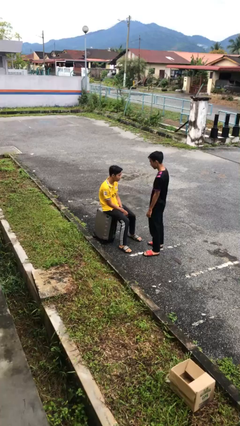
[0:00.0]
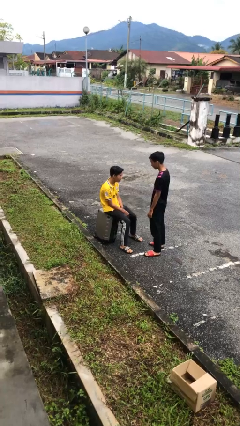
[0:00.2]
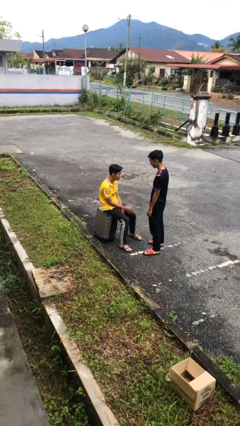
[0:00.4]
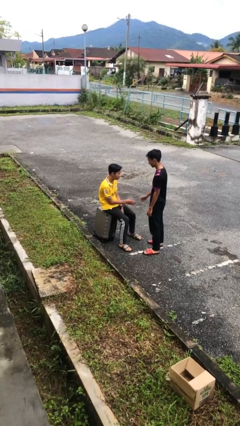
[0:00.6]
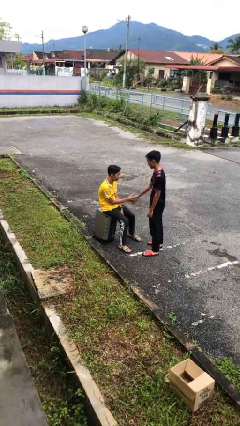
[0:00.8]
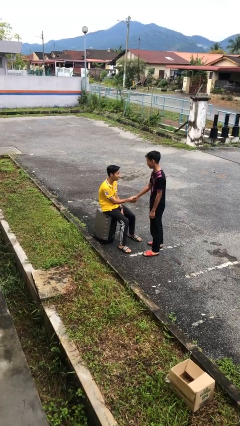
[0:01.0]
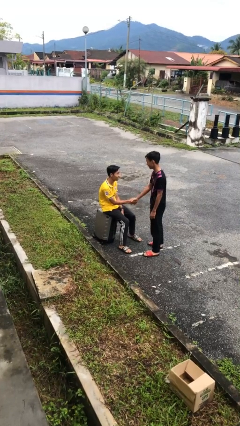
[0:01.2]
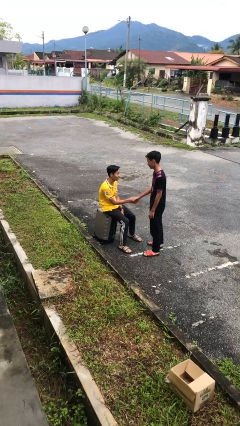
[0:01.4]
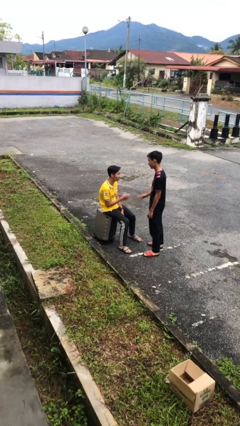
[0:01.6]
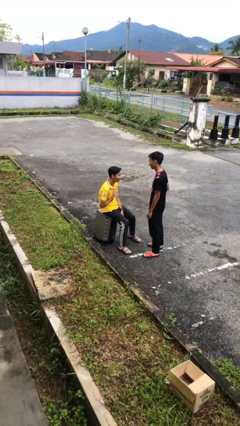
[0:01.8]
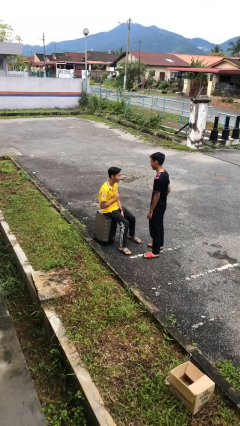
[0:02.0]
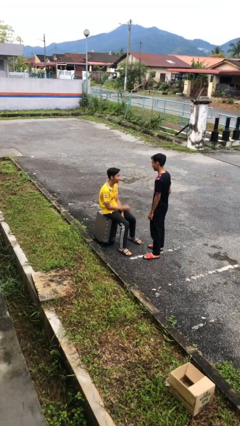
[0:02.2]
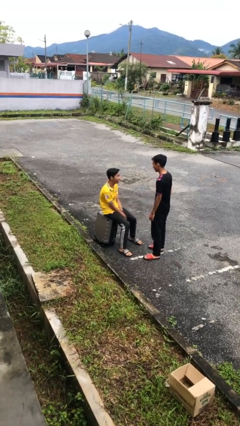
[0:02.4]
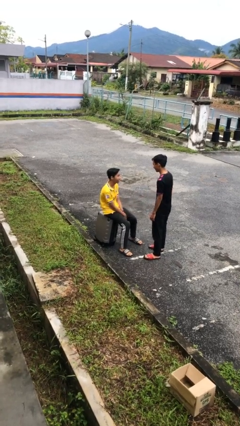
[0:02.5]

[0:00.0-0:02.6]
person shakes hand

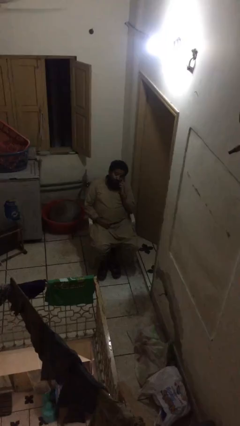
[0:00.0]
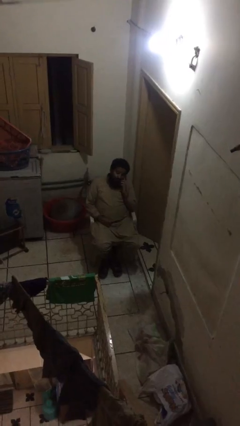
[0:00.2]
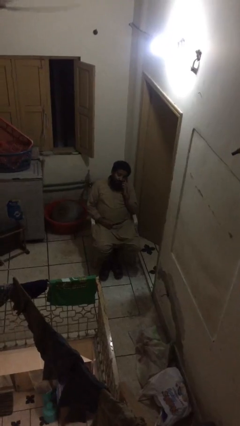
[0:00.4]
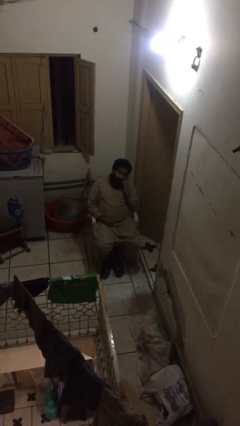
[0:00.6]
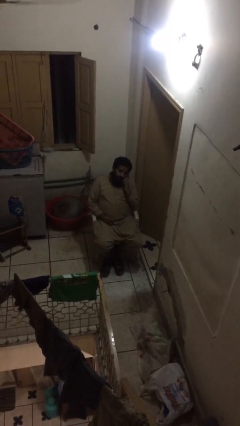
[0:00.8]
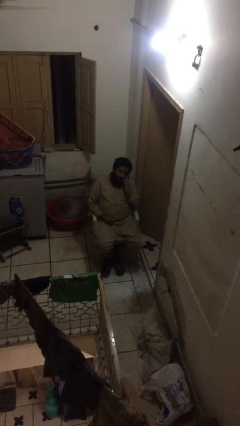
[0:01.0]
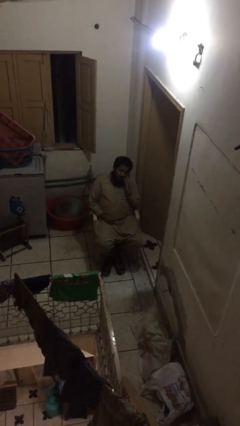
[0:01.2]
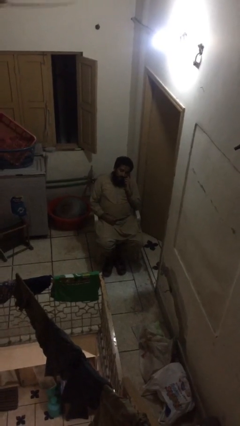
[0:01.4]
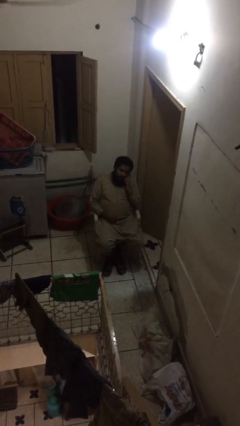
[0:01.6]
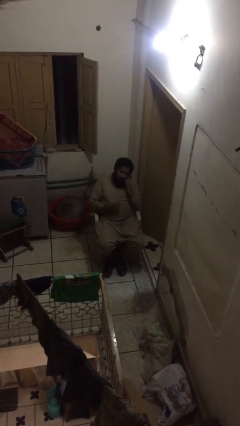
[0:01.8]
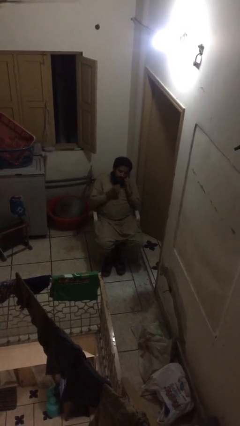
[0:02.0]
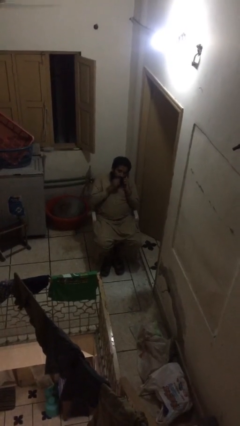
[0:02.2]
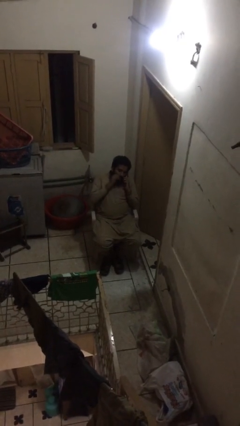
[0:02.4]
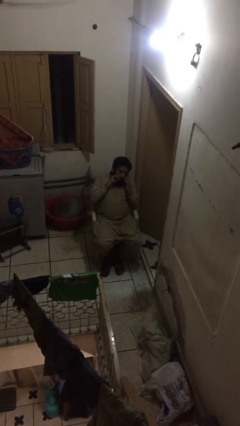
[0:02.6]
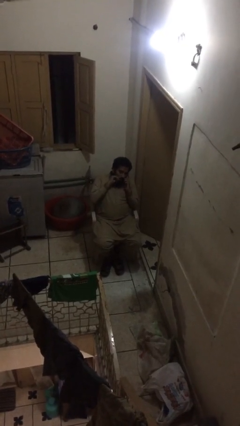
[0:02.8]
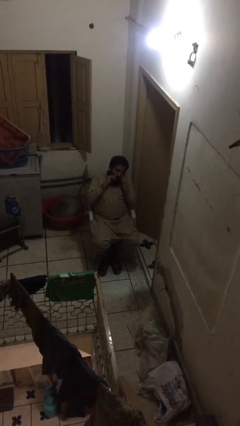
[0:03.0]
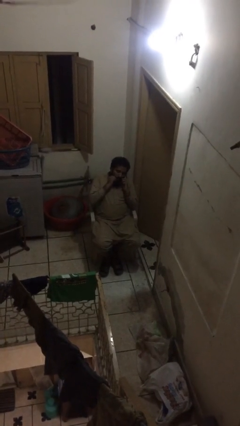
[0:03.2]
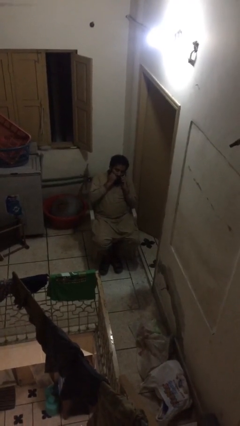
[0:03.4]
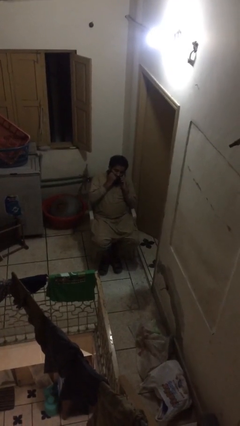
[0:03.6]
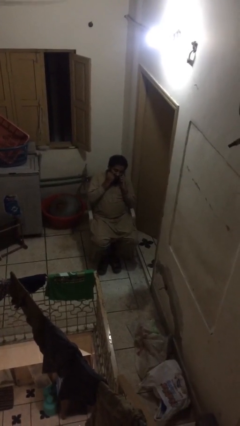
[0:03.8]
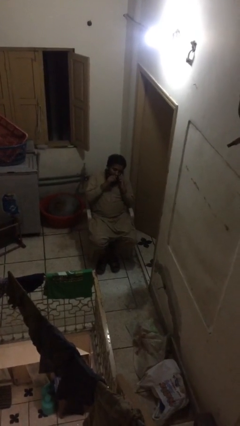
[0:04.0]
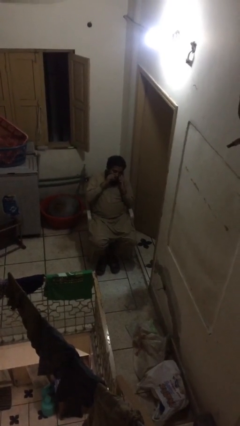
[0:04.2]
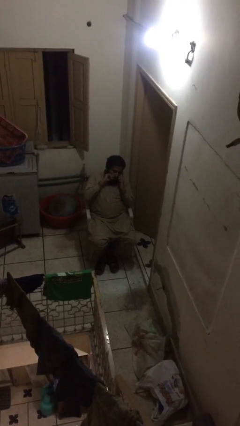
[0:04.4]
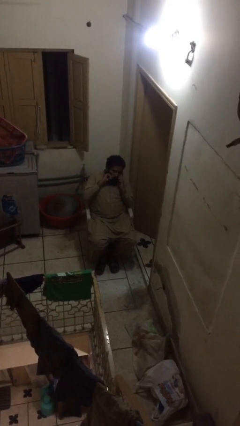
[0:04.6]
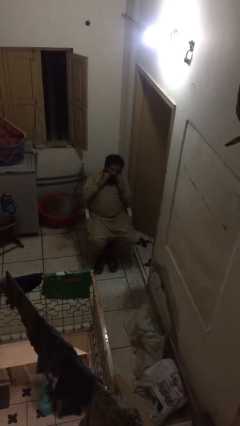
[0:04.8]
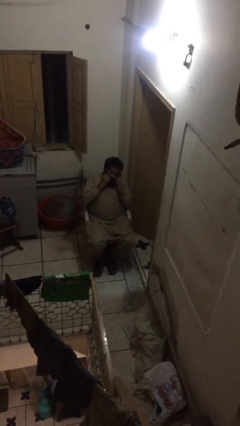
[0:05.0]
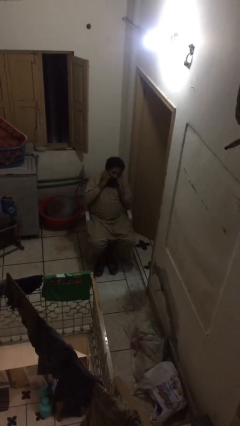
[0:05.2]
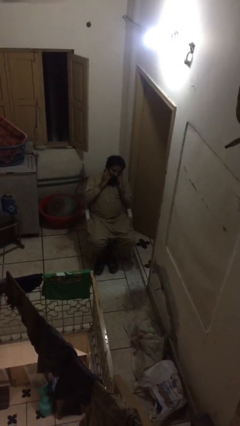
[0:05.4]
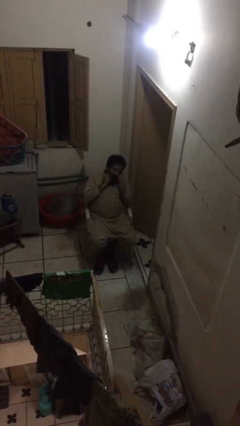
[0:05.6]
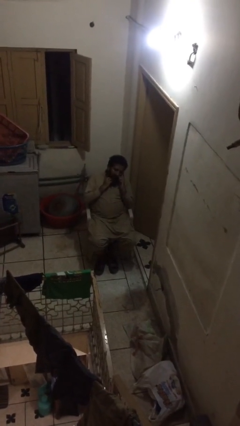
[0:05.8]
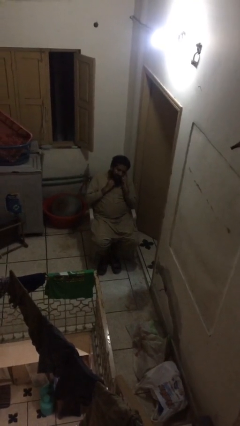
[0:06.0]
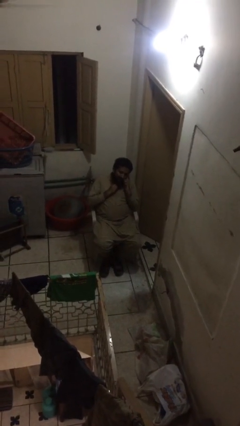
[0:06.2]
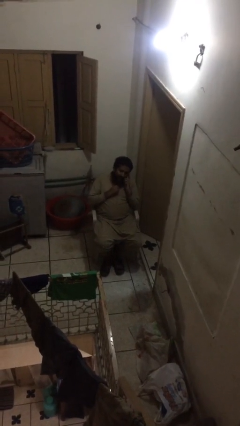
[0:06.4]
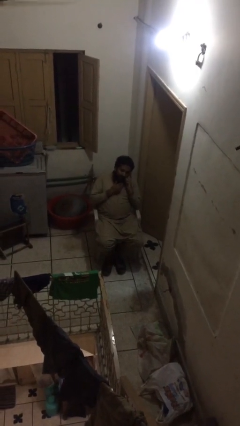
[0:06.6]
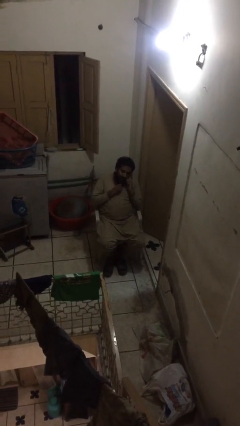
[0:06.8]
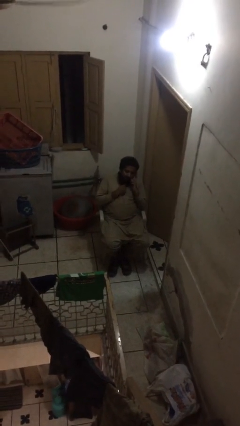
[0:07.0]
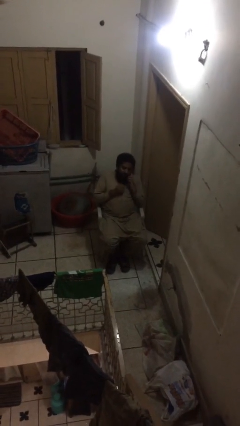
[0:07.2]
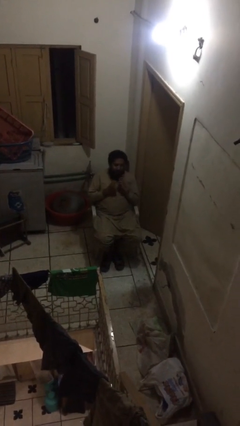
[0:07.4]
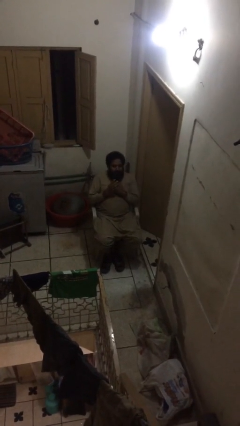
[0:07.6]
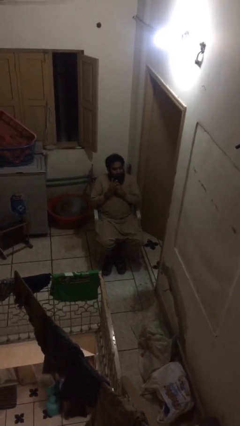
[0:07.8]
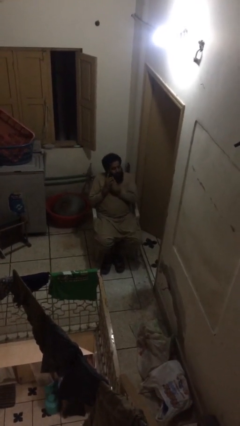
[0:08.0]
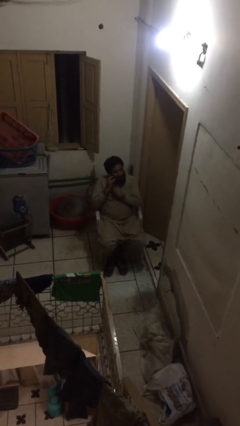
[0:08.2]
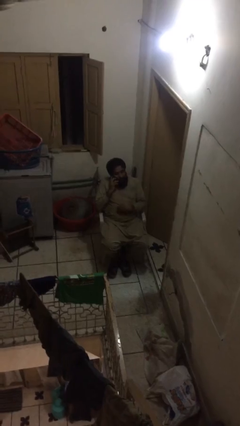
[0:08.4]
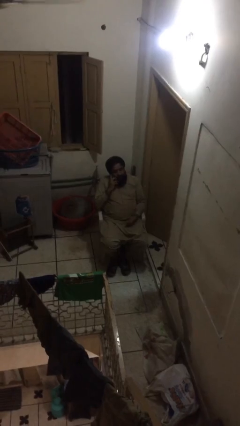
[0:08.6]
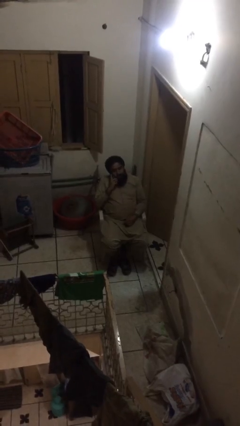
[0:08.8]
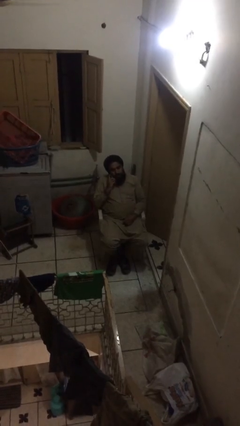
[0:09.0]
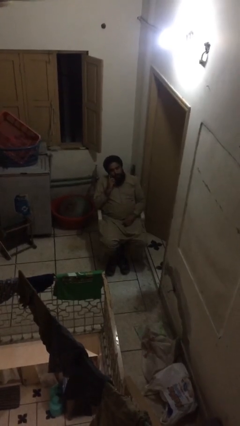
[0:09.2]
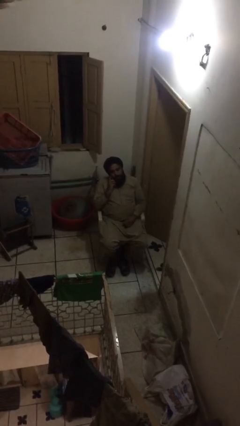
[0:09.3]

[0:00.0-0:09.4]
person talks on phone

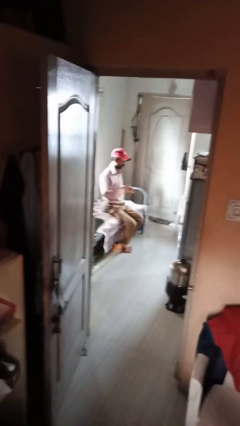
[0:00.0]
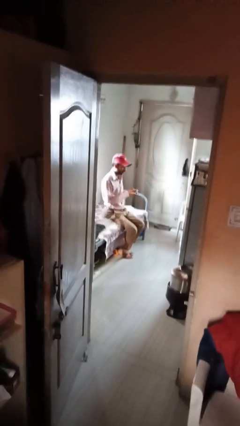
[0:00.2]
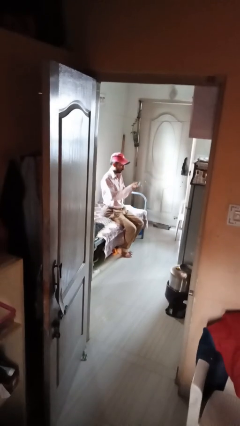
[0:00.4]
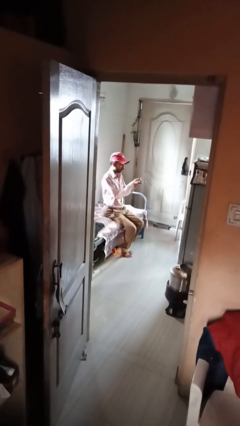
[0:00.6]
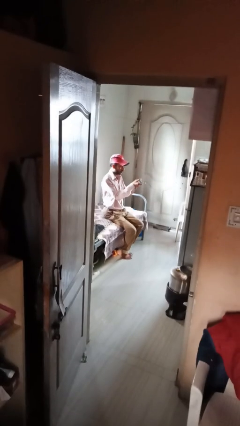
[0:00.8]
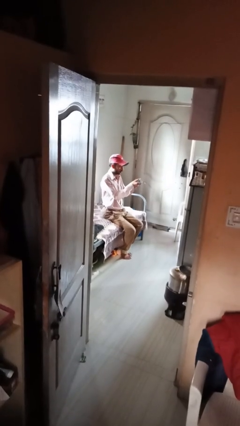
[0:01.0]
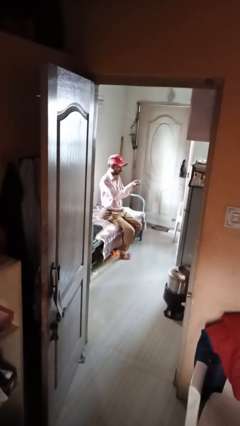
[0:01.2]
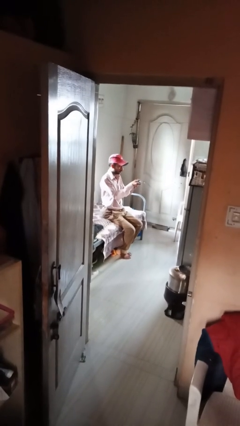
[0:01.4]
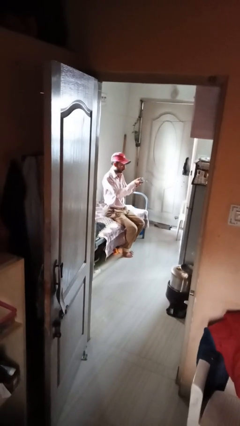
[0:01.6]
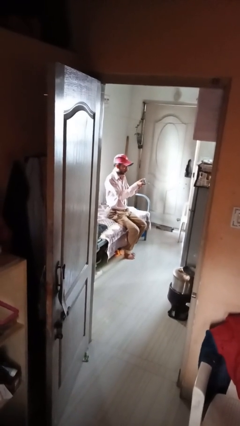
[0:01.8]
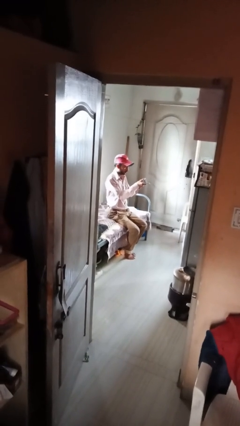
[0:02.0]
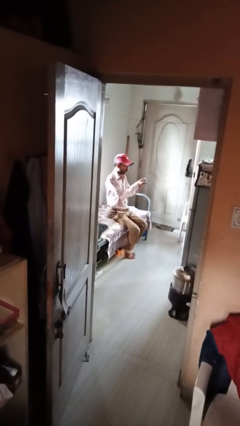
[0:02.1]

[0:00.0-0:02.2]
person clips fingernails

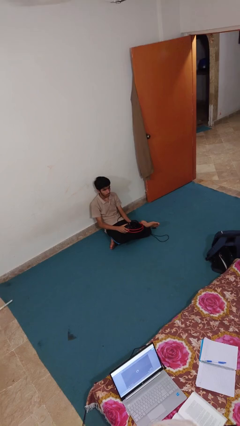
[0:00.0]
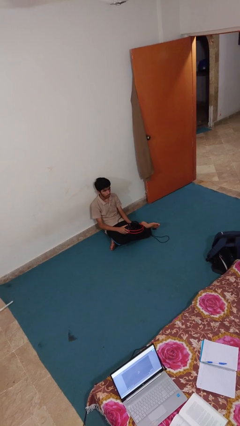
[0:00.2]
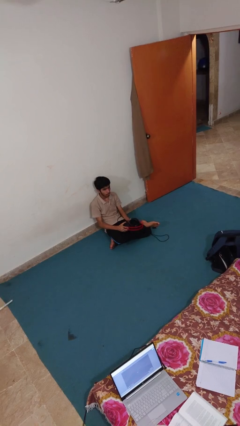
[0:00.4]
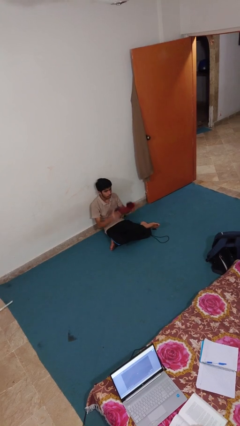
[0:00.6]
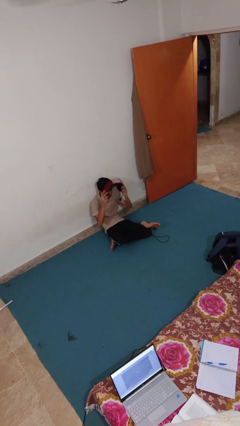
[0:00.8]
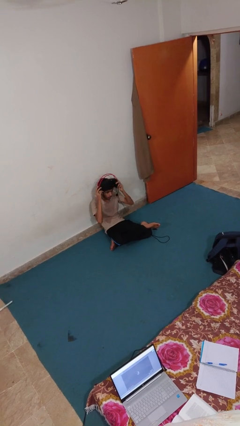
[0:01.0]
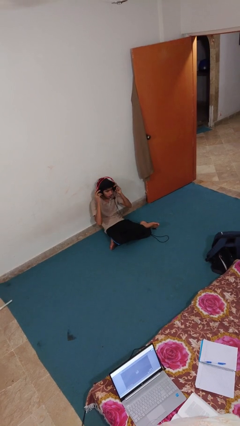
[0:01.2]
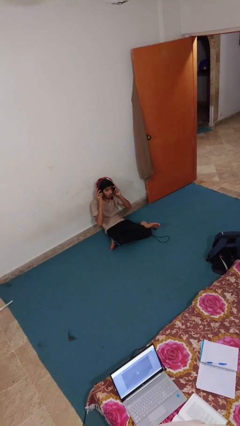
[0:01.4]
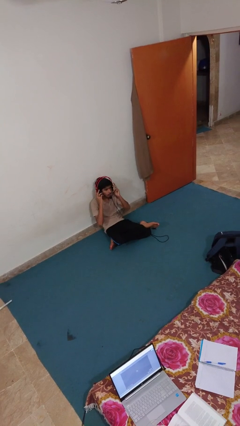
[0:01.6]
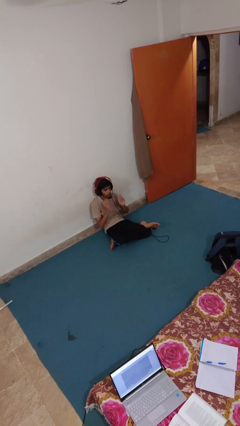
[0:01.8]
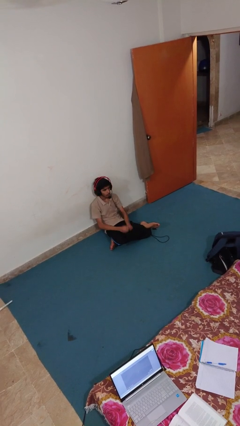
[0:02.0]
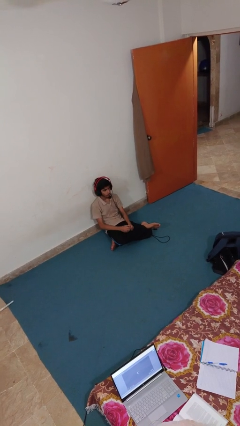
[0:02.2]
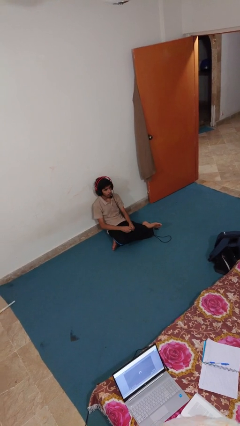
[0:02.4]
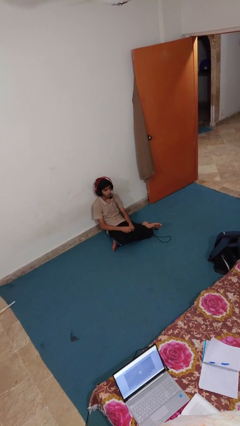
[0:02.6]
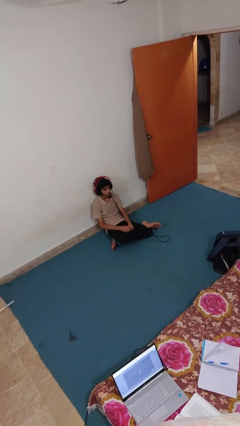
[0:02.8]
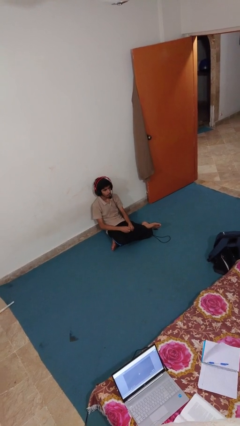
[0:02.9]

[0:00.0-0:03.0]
person puts on headphones

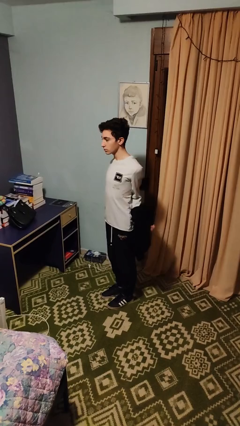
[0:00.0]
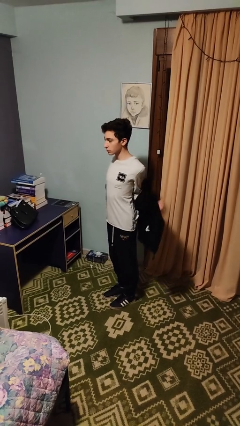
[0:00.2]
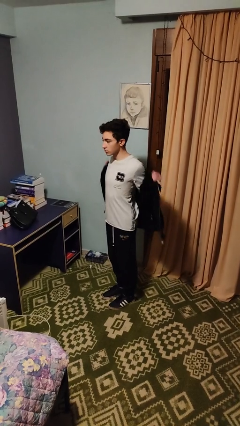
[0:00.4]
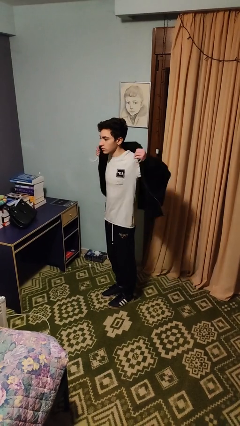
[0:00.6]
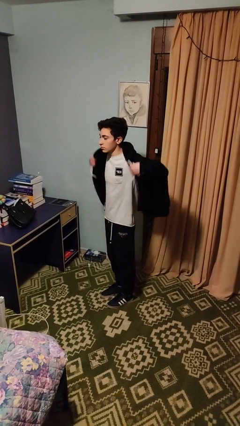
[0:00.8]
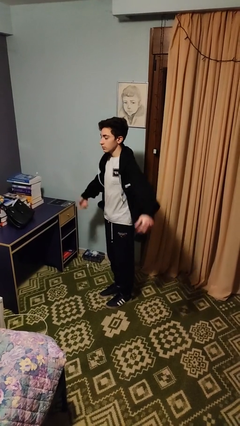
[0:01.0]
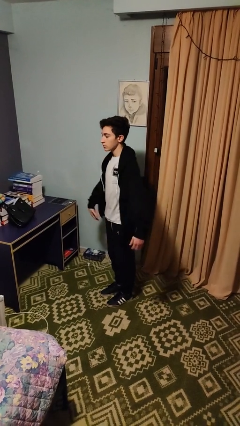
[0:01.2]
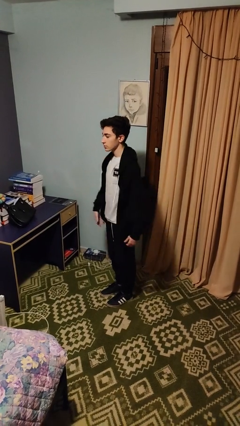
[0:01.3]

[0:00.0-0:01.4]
person puts on jacket
